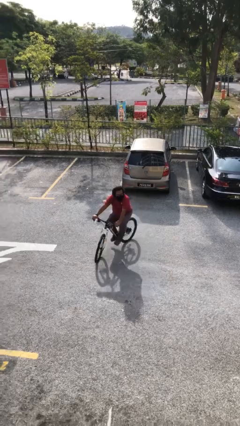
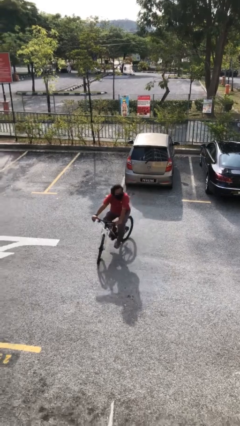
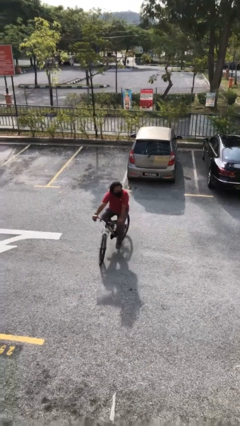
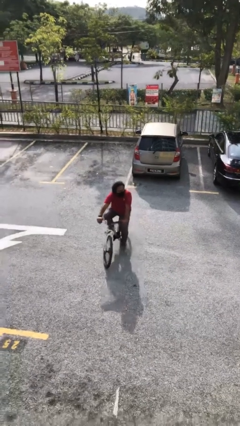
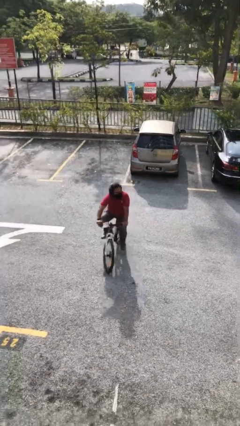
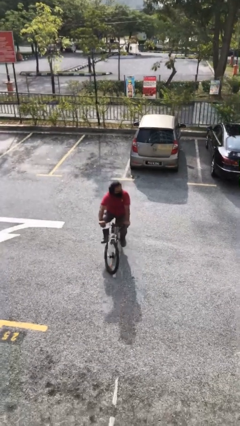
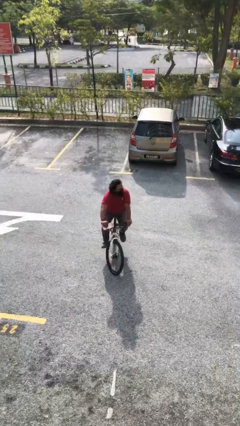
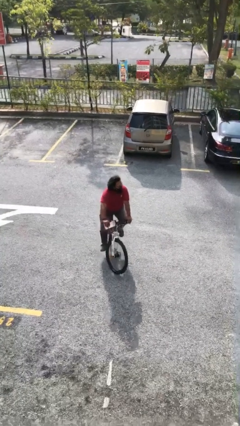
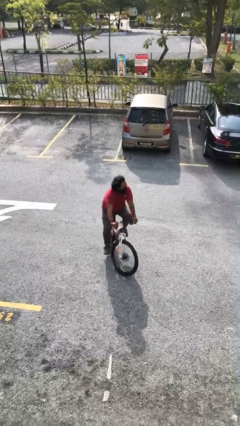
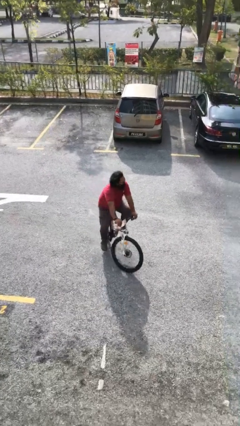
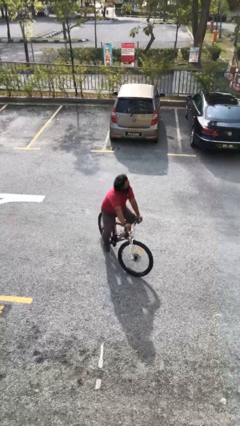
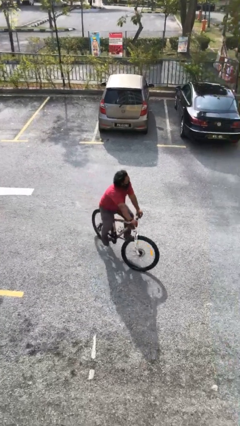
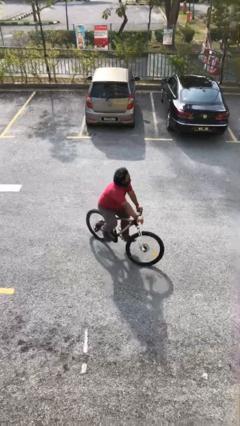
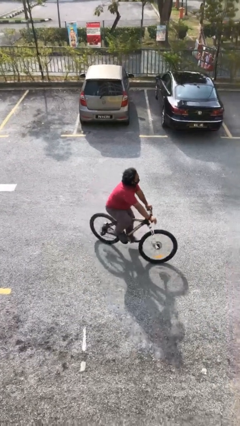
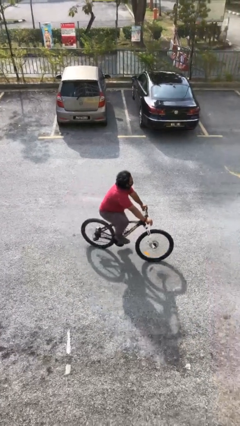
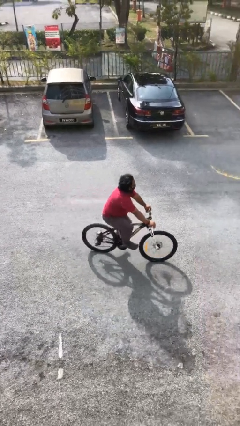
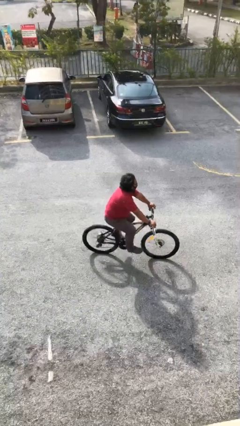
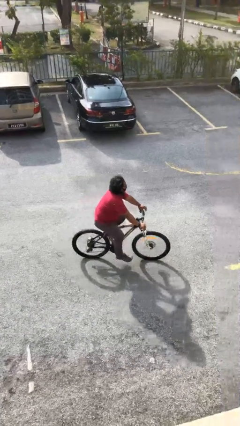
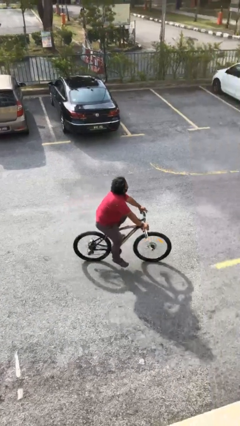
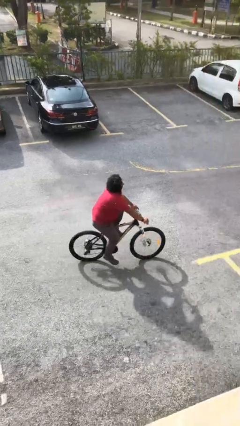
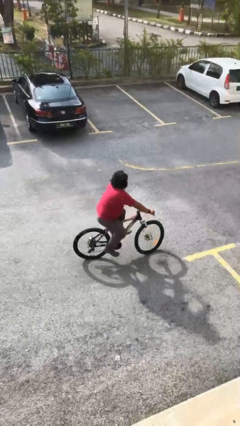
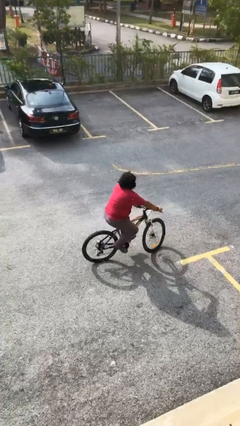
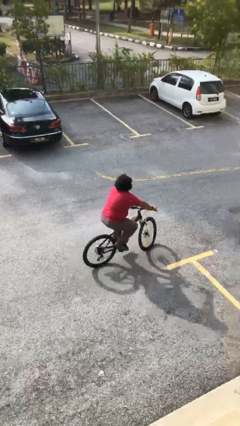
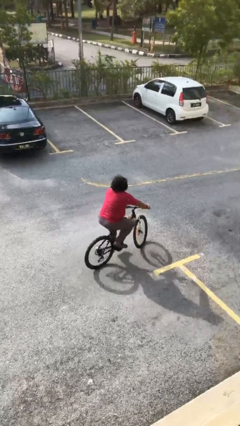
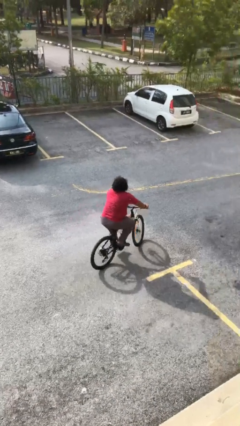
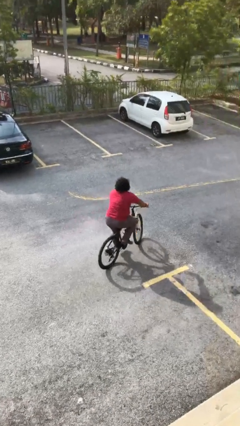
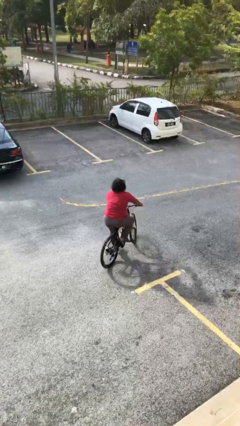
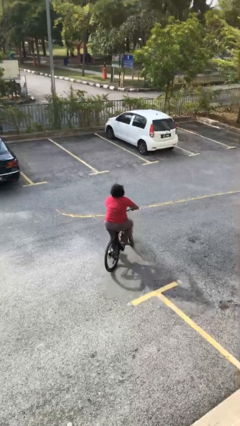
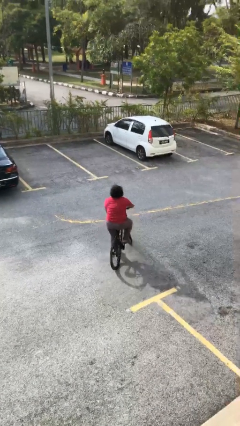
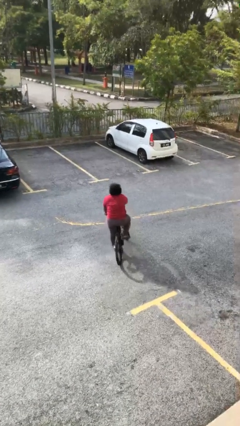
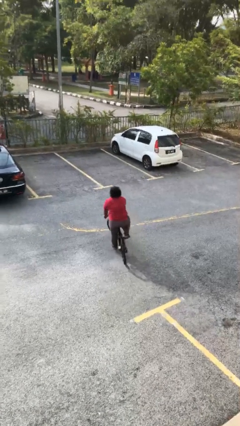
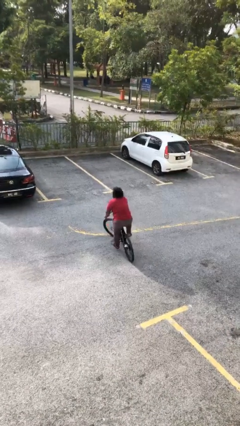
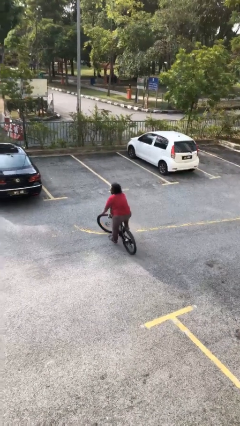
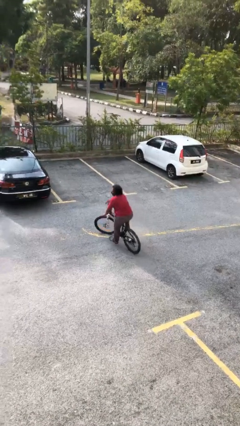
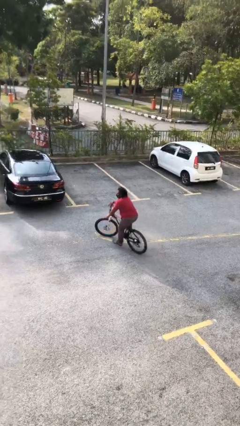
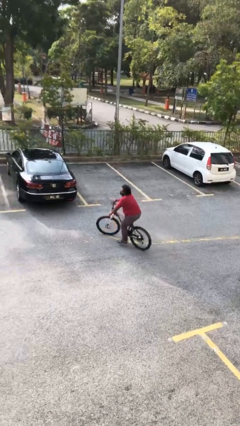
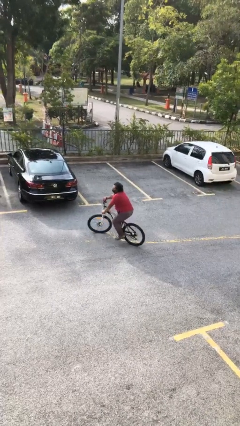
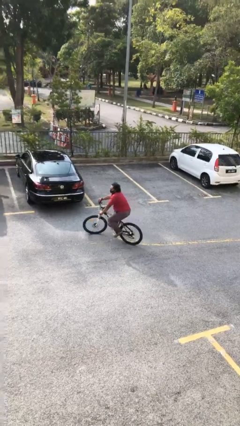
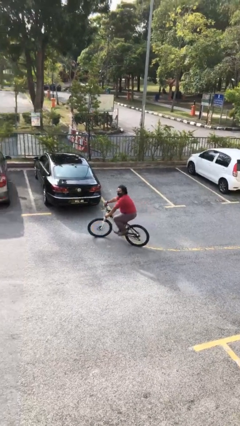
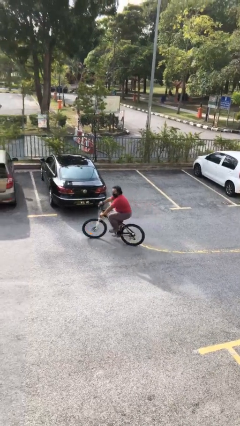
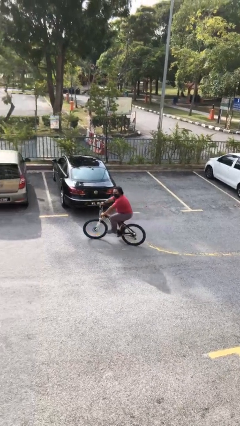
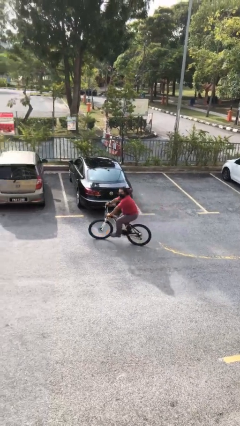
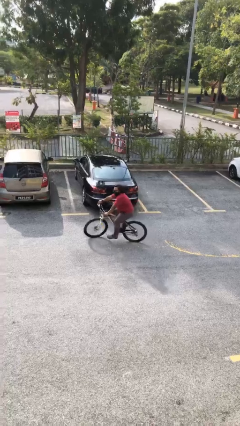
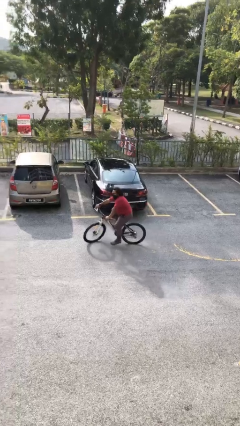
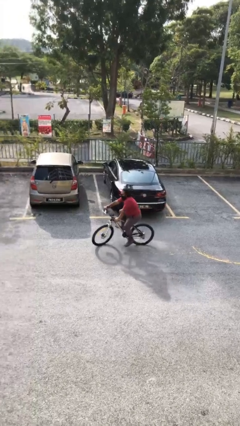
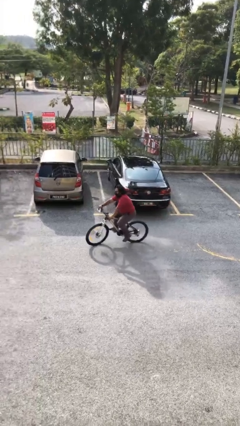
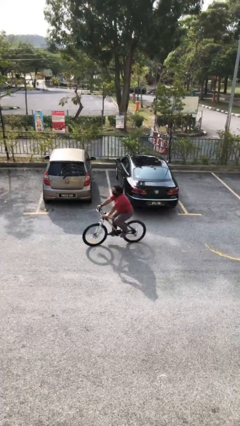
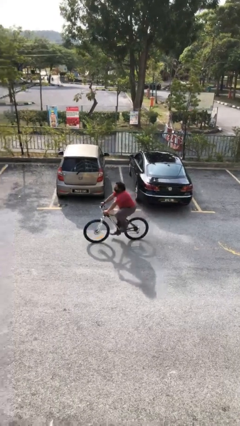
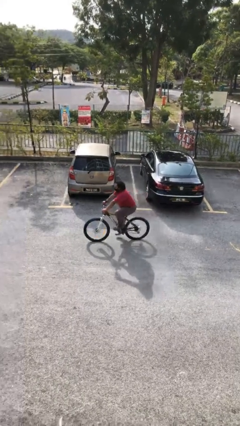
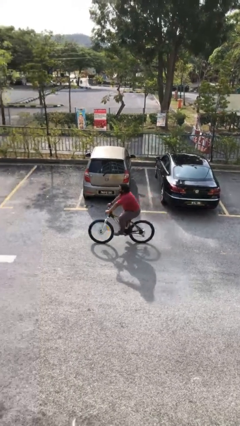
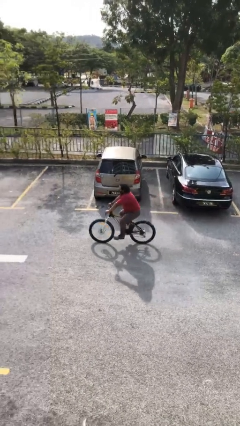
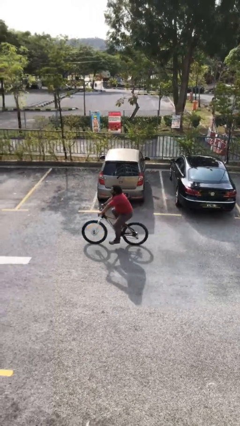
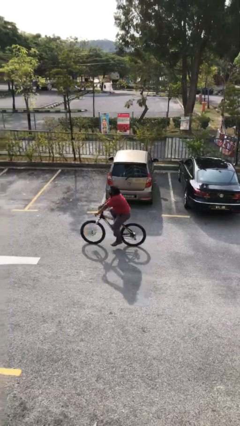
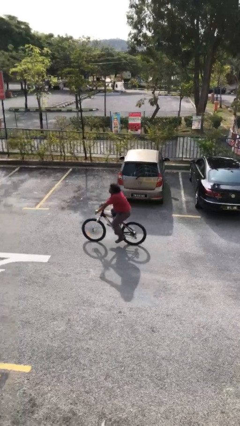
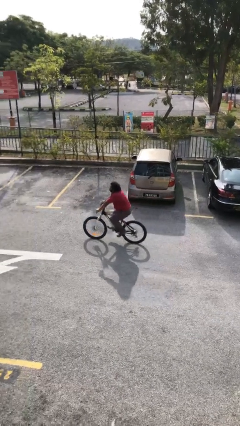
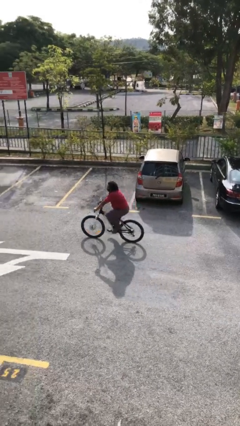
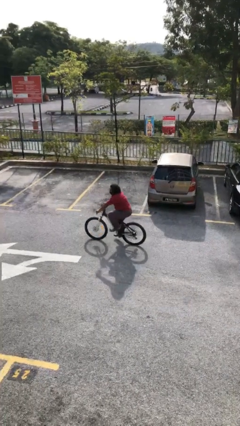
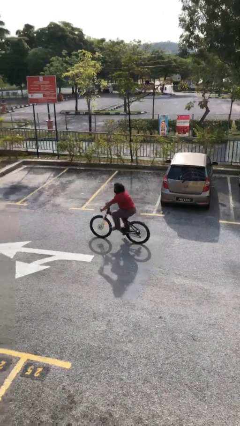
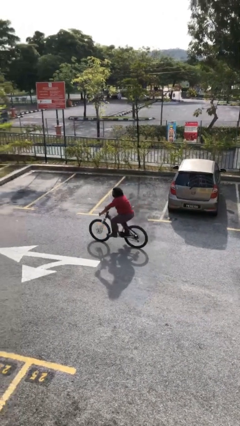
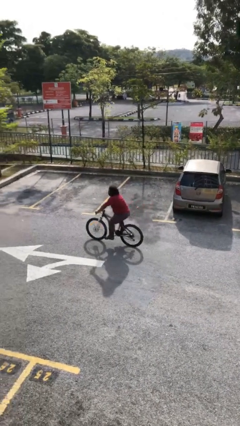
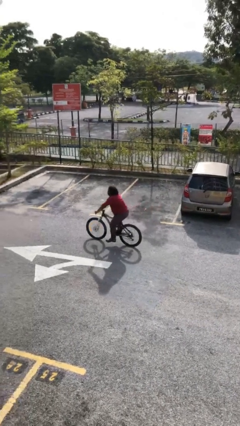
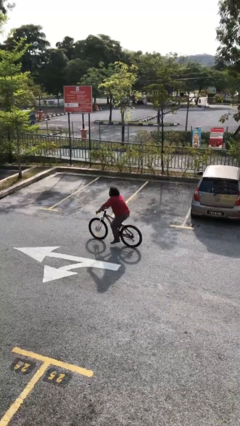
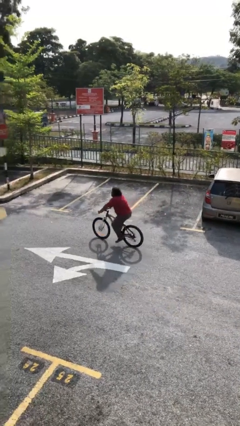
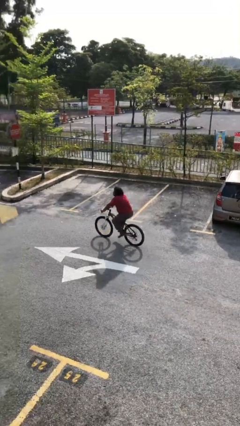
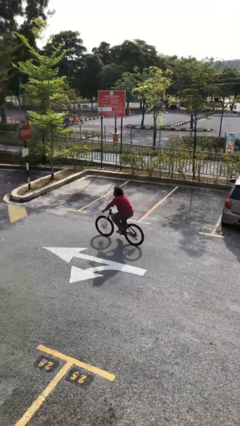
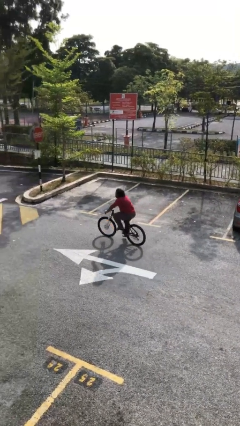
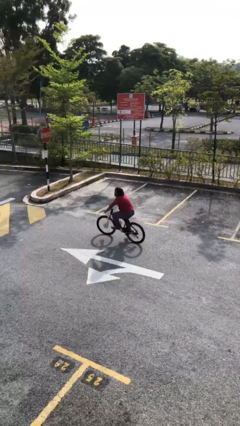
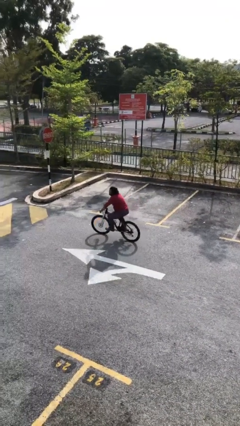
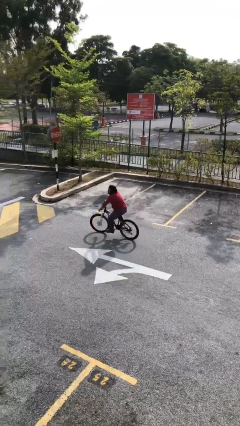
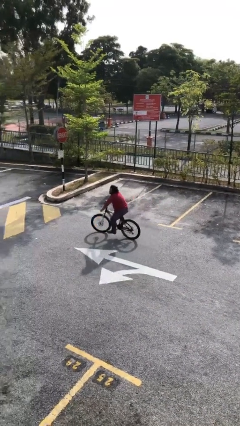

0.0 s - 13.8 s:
person rides bicycle

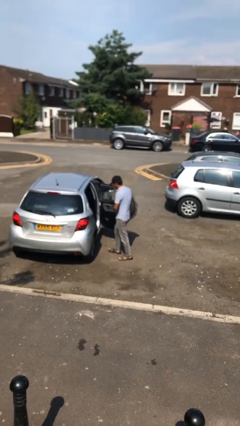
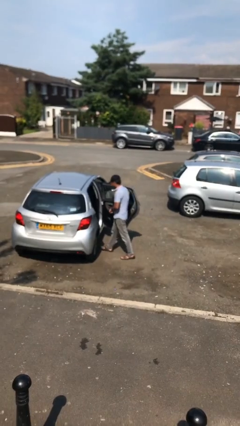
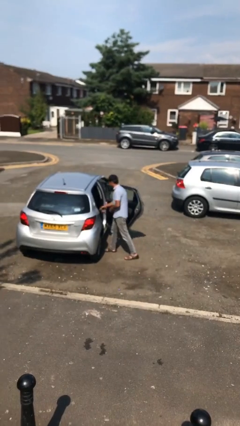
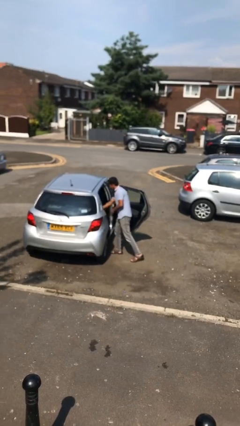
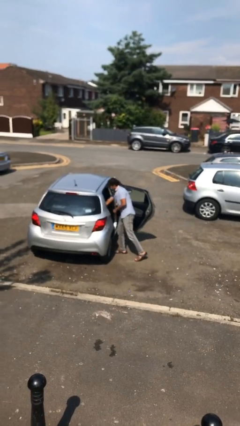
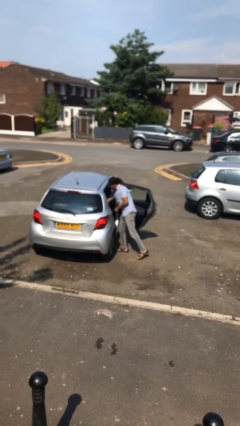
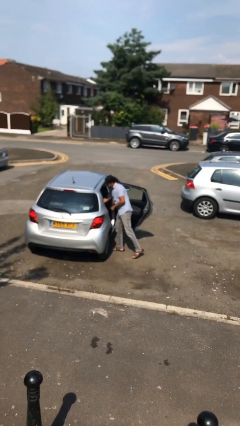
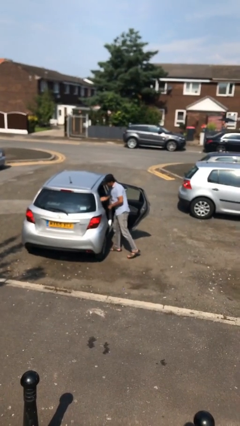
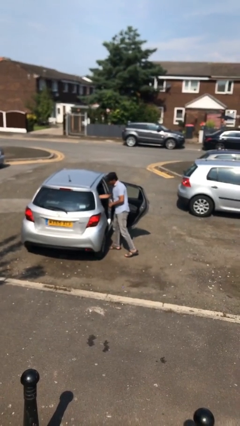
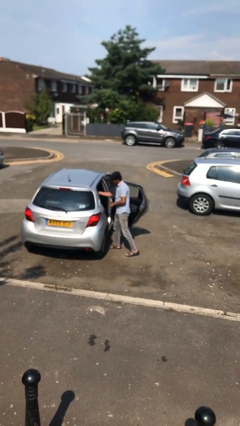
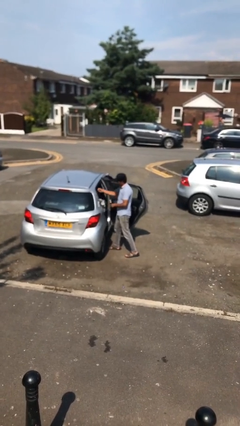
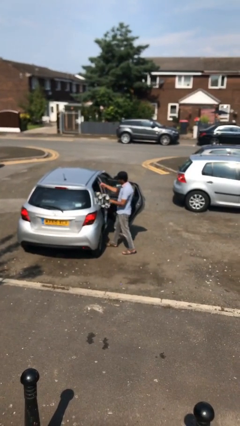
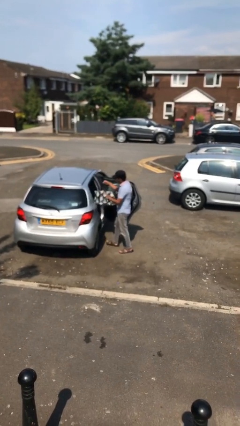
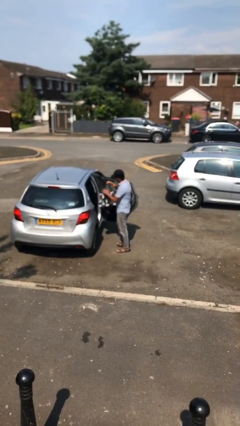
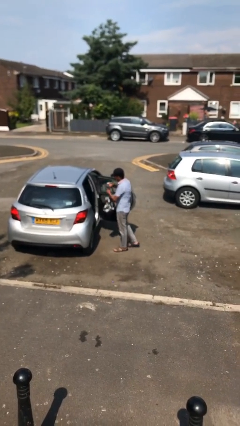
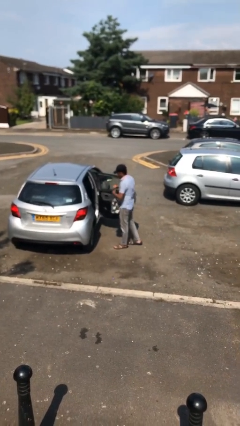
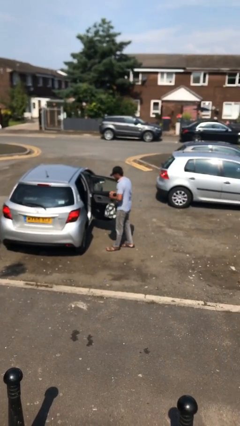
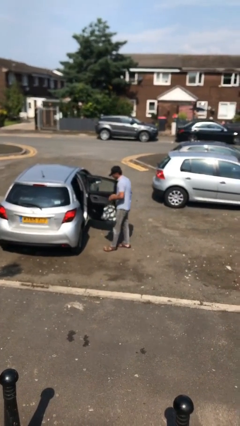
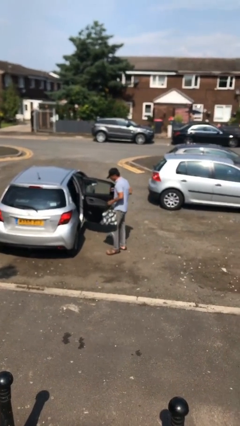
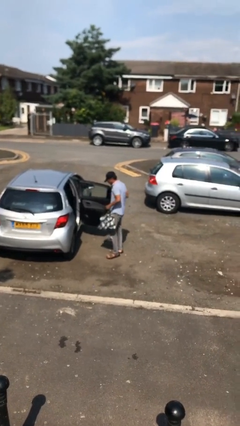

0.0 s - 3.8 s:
person unloads car

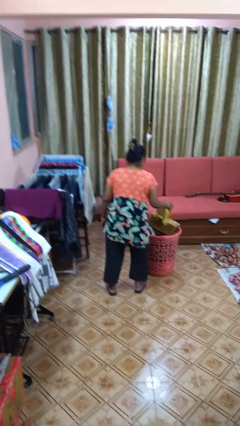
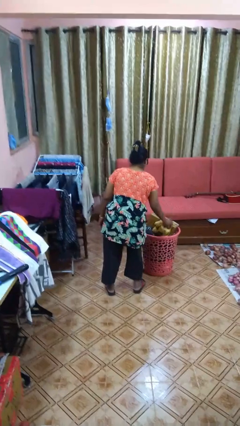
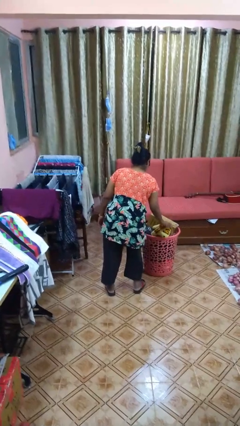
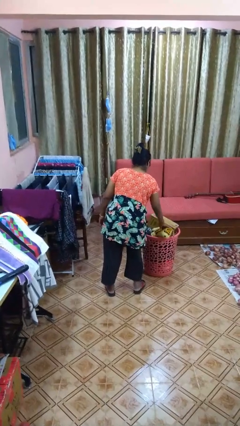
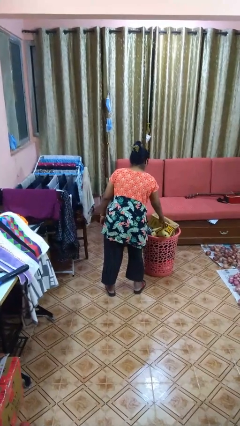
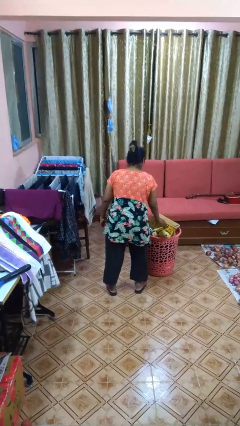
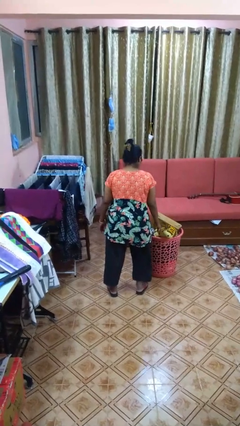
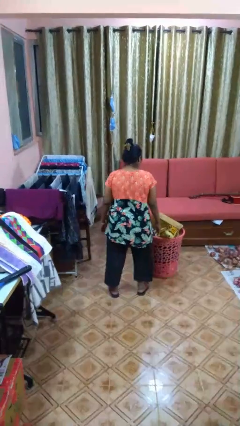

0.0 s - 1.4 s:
person puts object into basket
